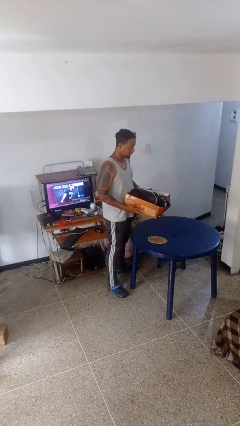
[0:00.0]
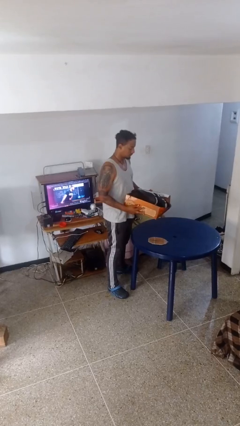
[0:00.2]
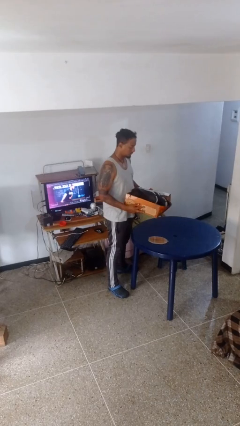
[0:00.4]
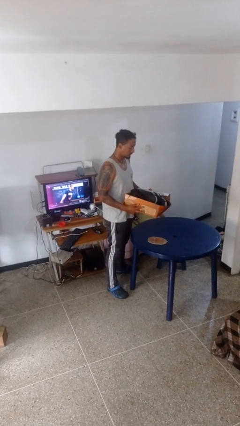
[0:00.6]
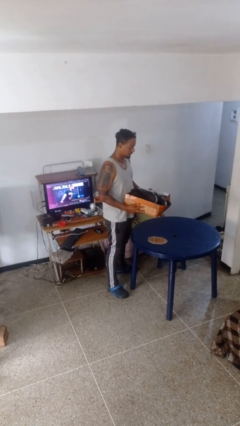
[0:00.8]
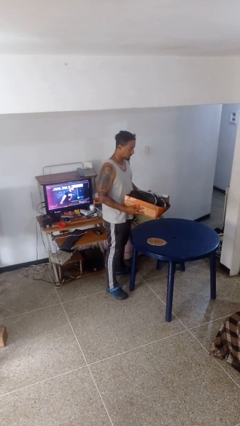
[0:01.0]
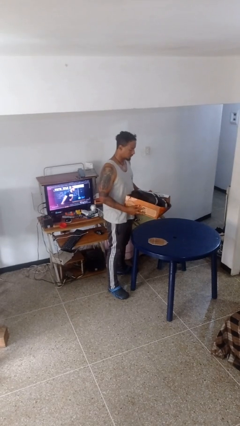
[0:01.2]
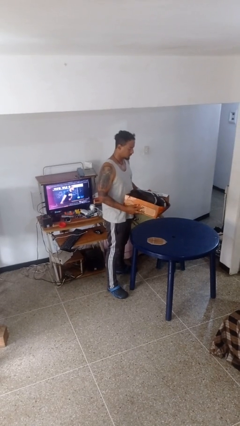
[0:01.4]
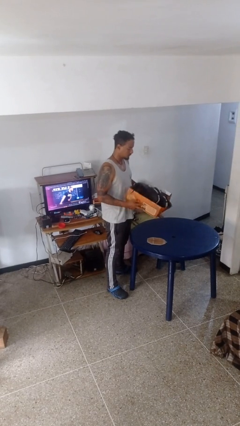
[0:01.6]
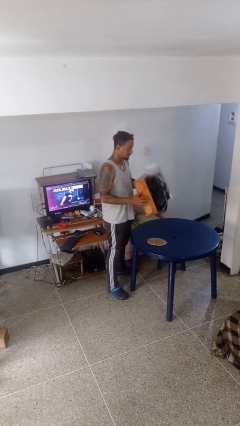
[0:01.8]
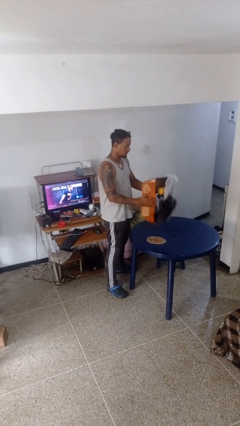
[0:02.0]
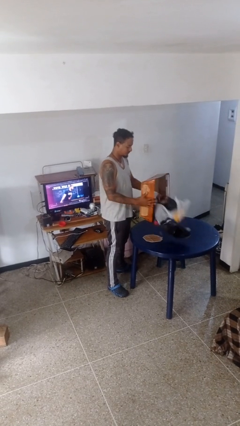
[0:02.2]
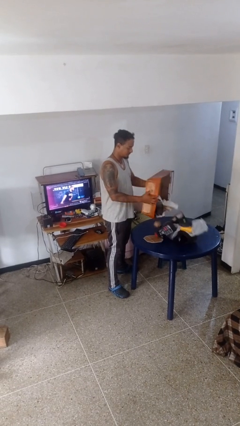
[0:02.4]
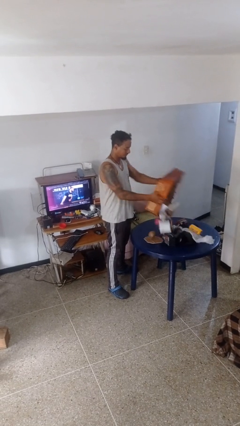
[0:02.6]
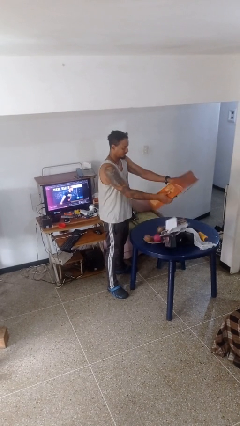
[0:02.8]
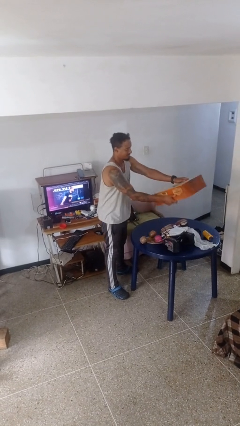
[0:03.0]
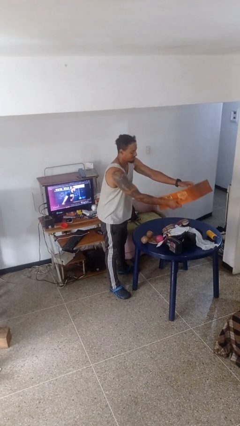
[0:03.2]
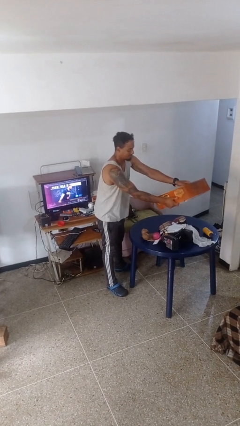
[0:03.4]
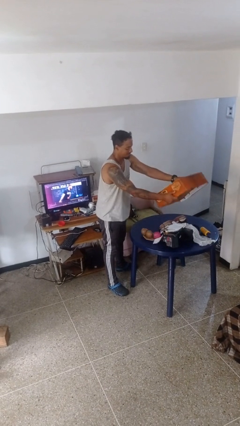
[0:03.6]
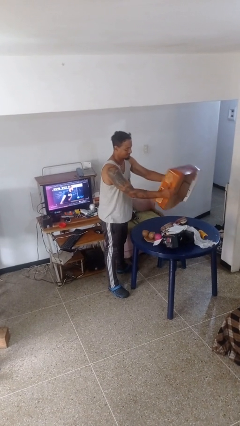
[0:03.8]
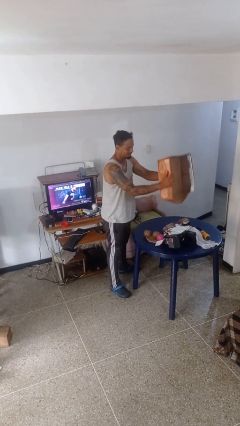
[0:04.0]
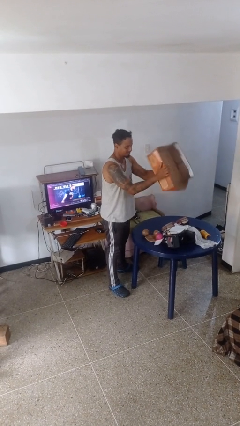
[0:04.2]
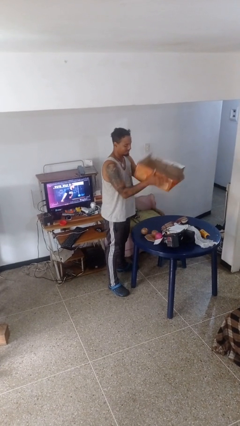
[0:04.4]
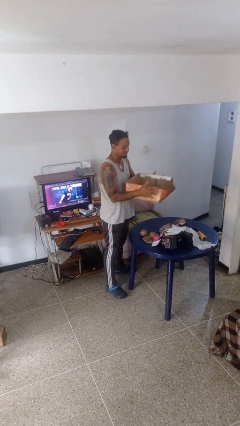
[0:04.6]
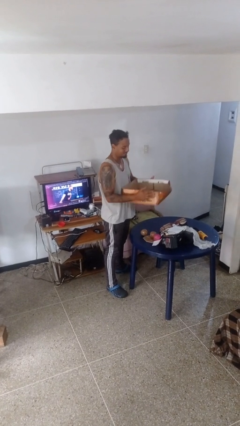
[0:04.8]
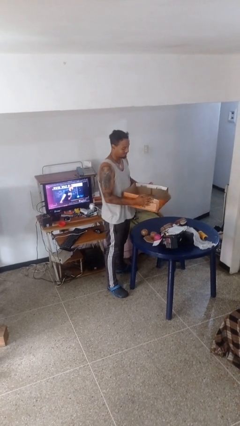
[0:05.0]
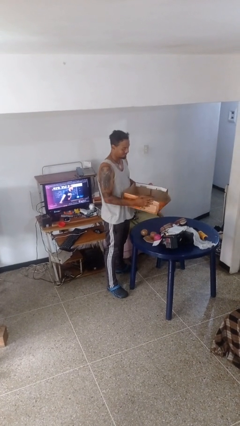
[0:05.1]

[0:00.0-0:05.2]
person unloads box onto table

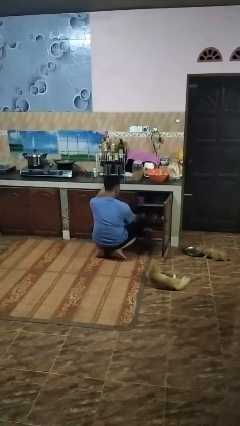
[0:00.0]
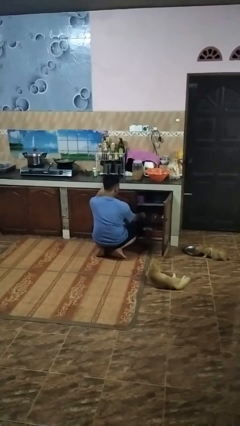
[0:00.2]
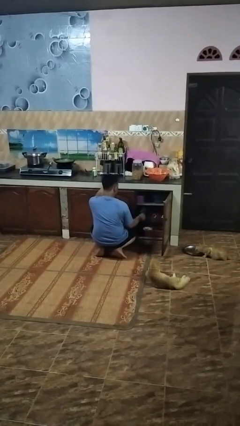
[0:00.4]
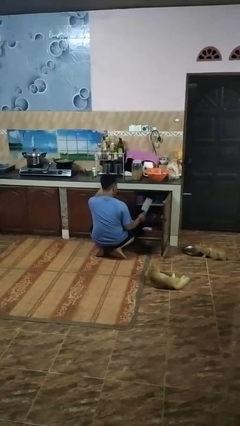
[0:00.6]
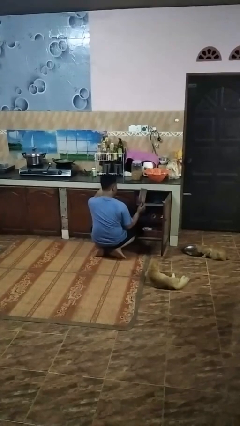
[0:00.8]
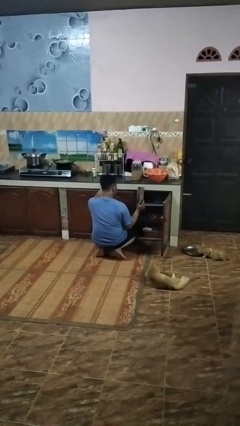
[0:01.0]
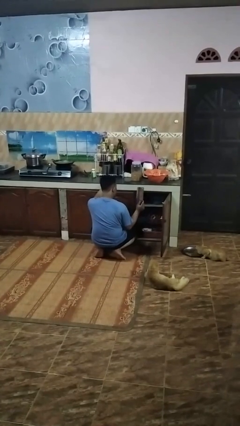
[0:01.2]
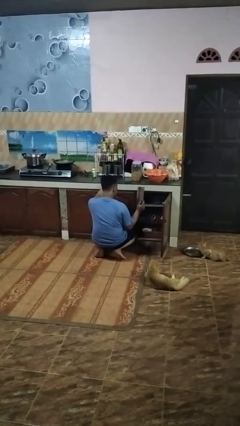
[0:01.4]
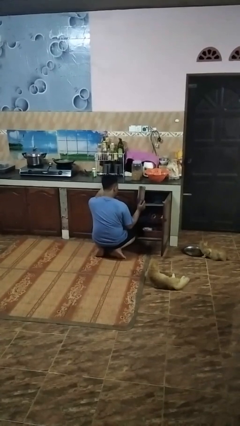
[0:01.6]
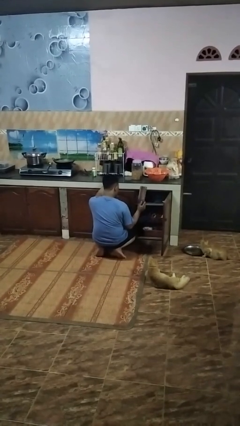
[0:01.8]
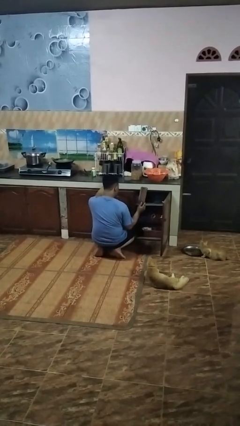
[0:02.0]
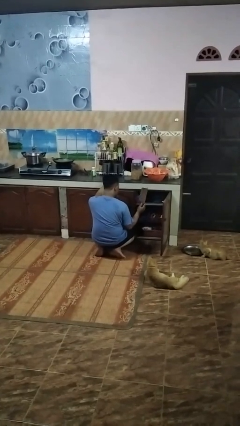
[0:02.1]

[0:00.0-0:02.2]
person takes object from kitchen drawer

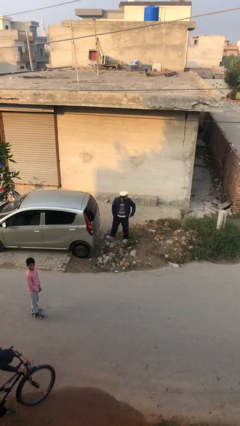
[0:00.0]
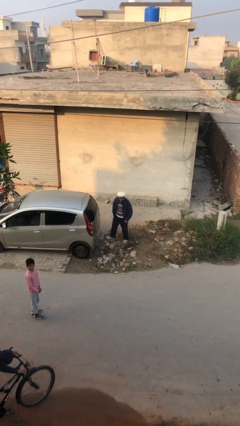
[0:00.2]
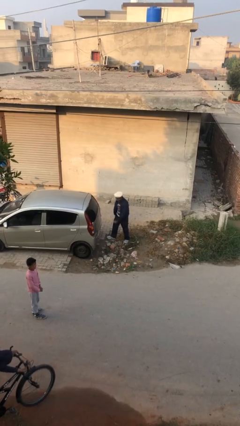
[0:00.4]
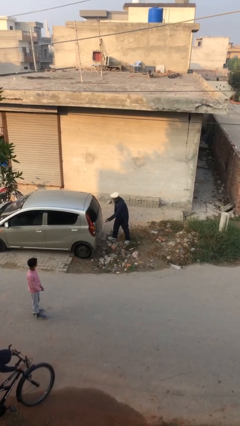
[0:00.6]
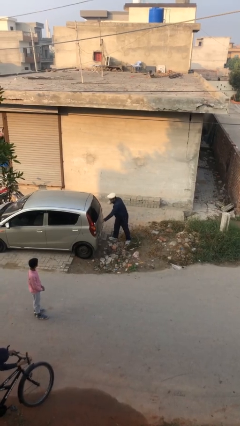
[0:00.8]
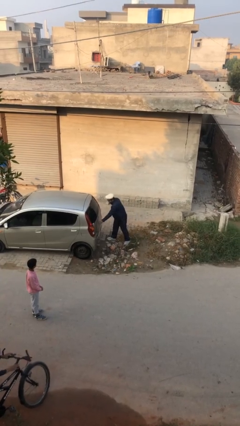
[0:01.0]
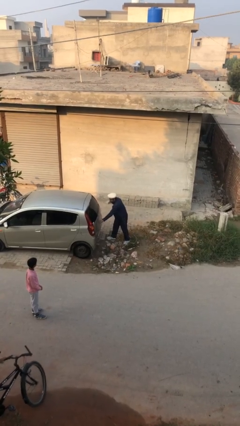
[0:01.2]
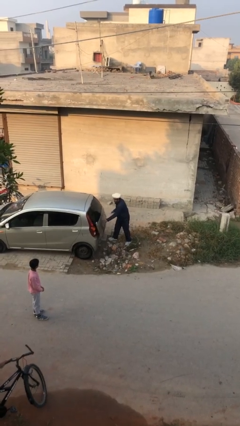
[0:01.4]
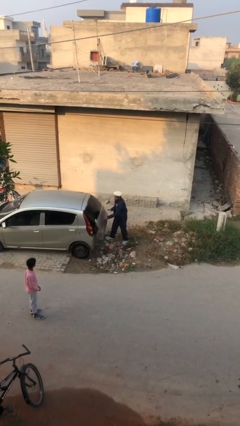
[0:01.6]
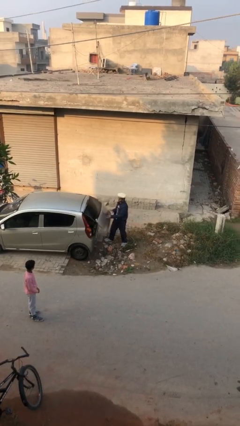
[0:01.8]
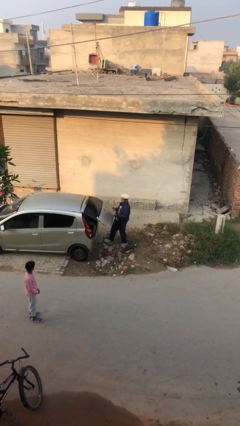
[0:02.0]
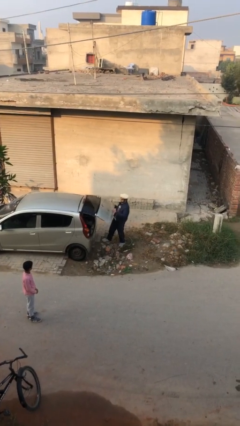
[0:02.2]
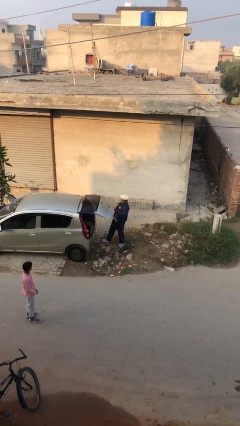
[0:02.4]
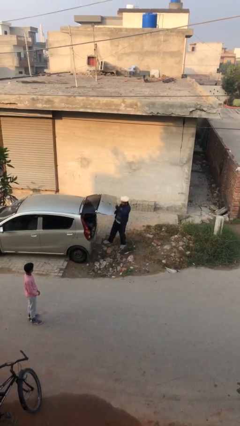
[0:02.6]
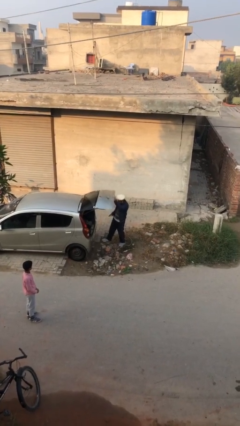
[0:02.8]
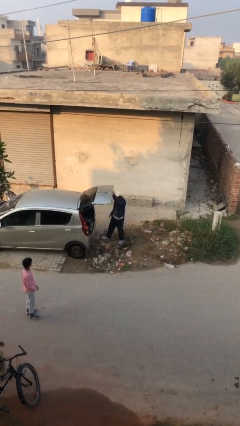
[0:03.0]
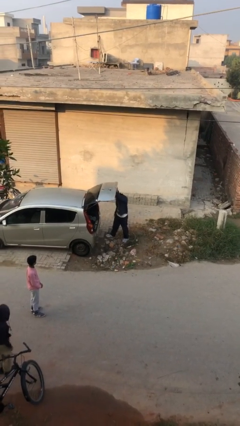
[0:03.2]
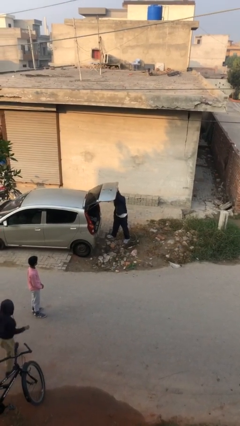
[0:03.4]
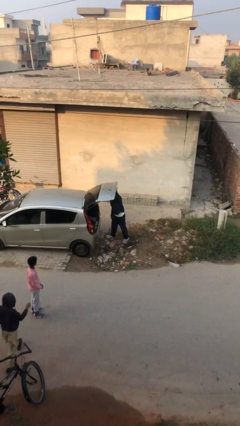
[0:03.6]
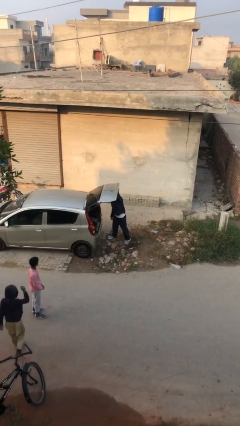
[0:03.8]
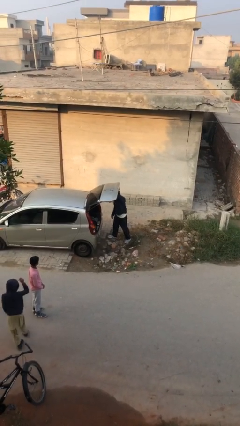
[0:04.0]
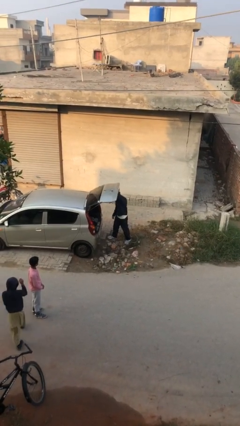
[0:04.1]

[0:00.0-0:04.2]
person opens car trunk

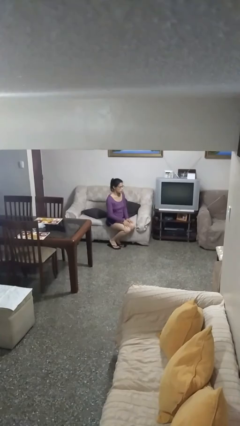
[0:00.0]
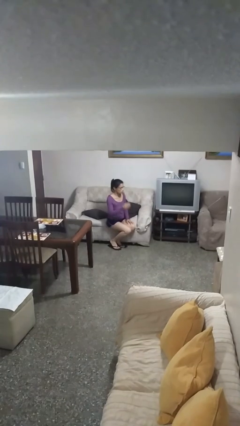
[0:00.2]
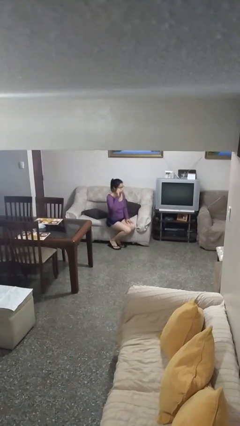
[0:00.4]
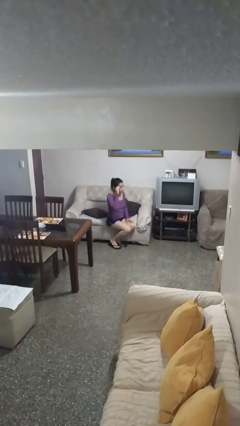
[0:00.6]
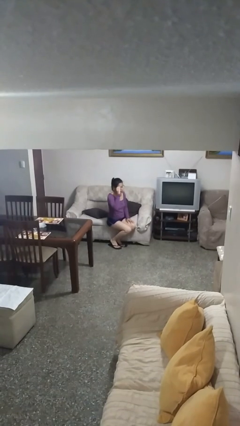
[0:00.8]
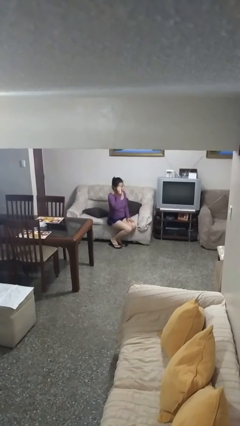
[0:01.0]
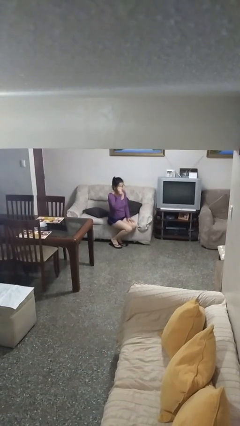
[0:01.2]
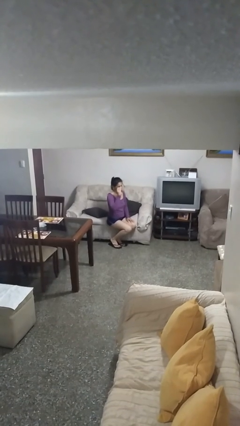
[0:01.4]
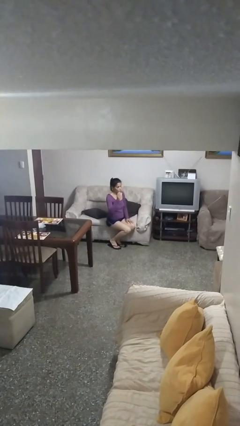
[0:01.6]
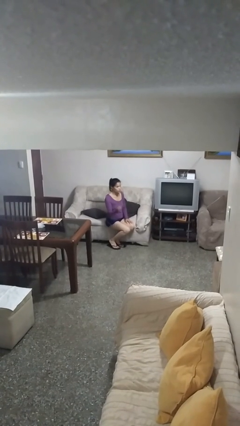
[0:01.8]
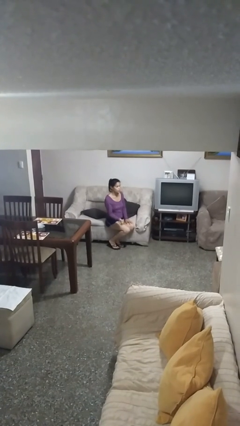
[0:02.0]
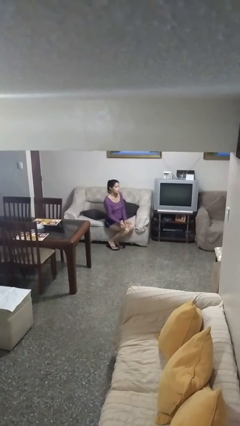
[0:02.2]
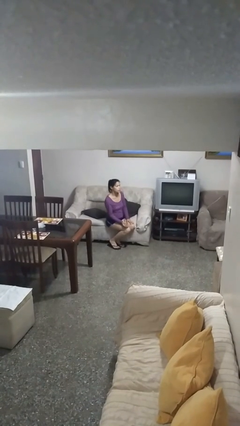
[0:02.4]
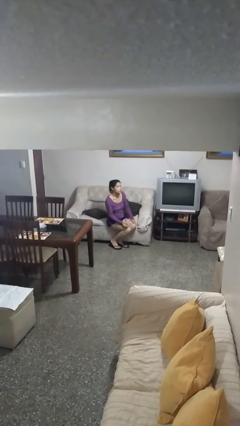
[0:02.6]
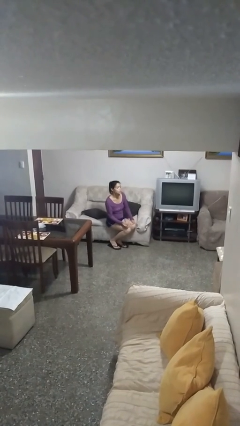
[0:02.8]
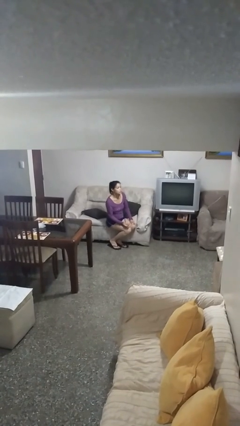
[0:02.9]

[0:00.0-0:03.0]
person takes off glasses

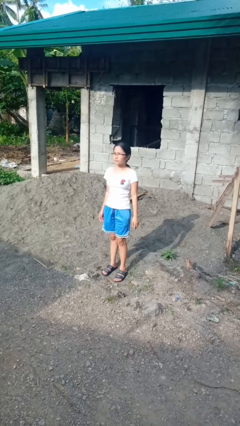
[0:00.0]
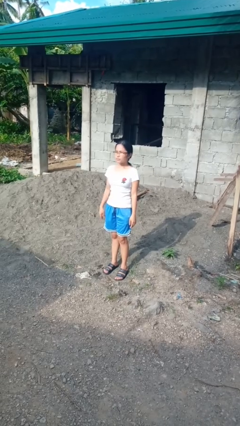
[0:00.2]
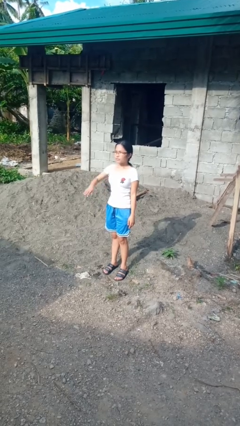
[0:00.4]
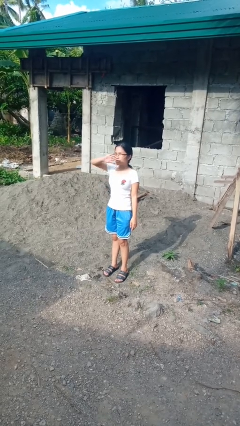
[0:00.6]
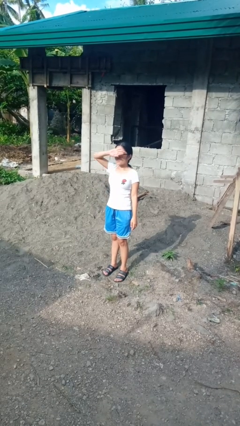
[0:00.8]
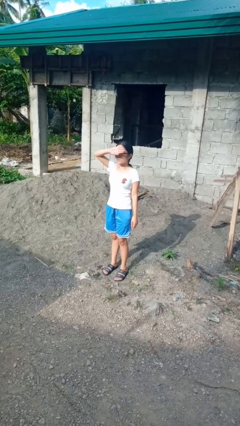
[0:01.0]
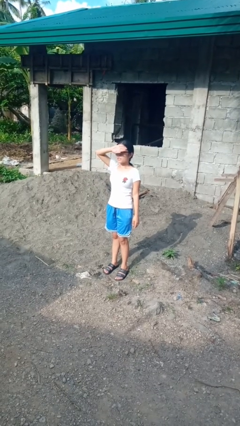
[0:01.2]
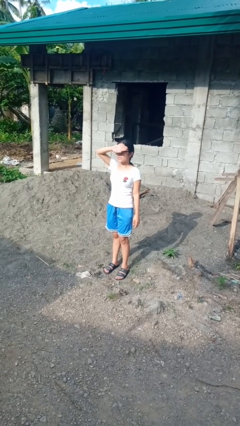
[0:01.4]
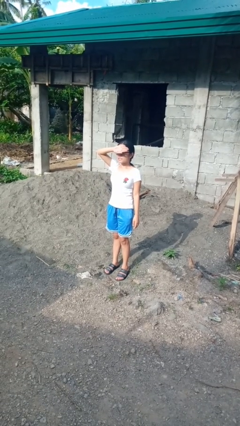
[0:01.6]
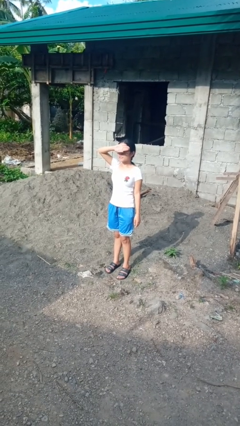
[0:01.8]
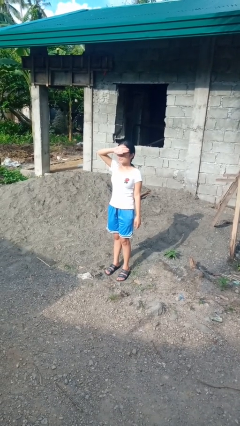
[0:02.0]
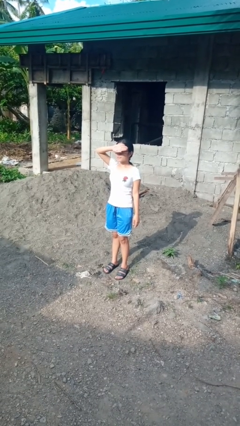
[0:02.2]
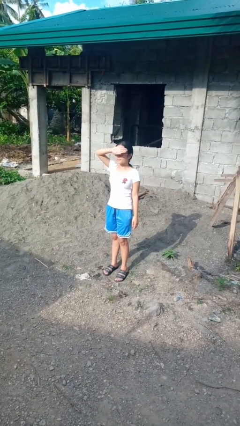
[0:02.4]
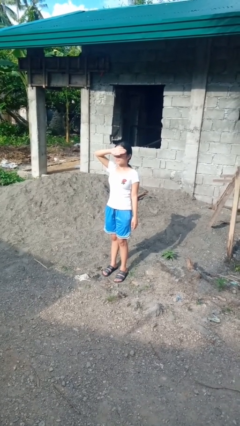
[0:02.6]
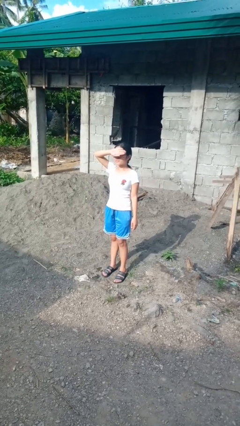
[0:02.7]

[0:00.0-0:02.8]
person shades eyes
